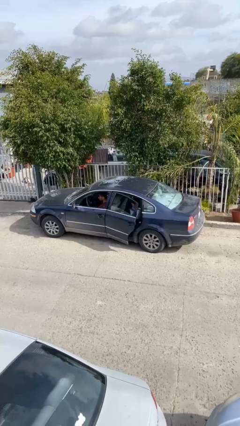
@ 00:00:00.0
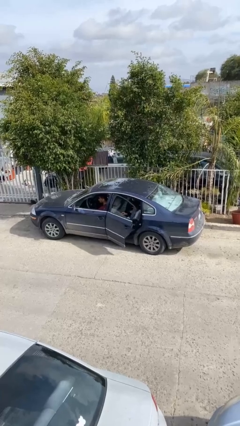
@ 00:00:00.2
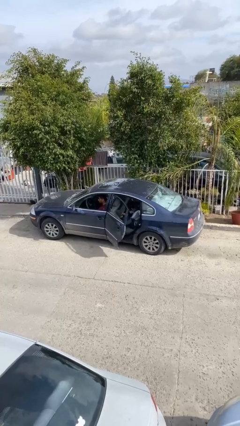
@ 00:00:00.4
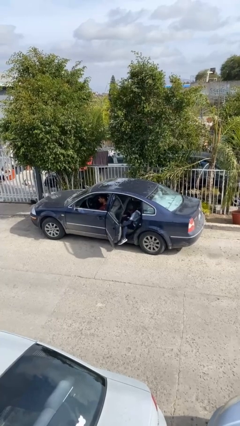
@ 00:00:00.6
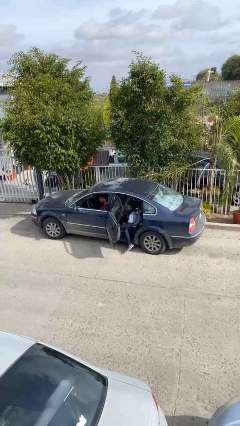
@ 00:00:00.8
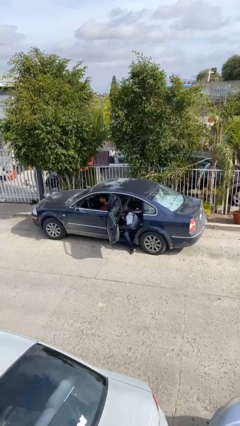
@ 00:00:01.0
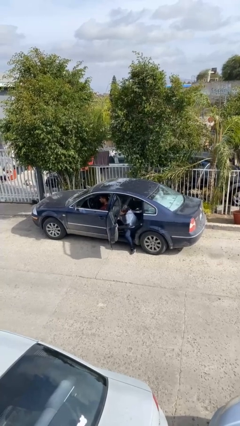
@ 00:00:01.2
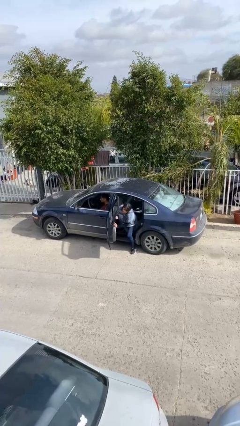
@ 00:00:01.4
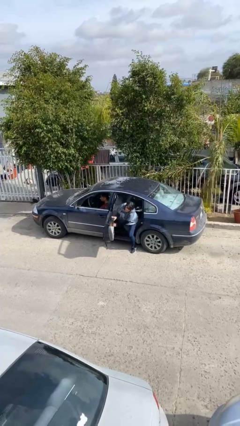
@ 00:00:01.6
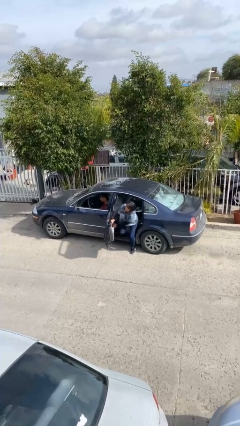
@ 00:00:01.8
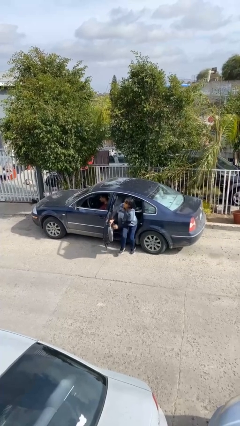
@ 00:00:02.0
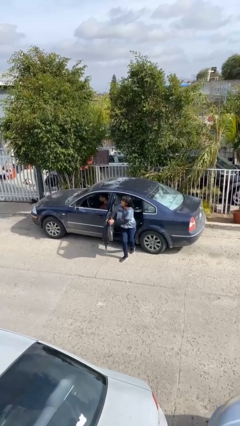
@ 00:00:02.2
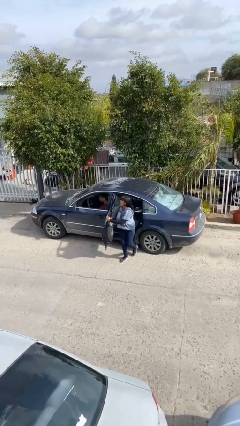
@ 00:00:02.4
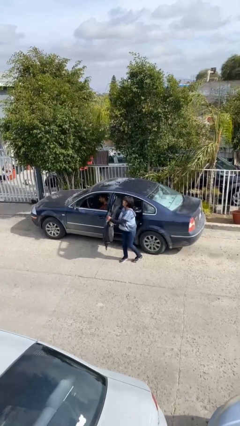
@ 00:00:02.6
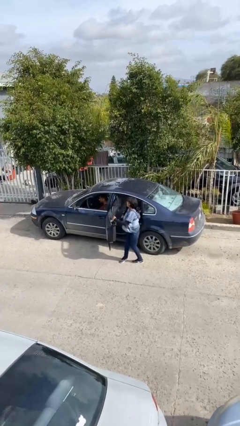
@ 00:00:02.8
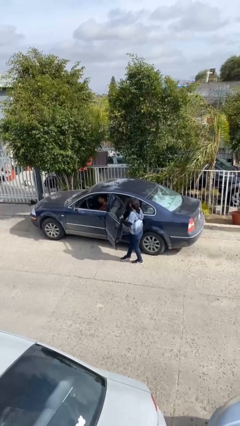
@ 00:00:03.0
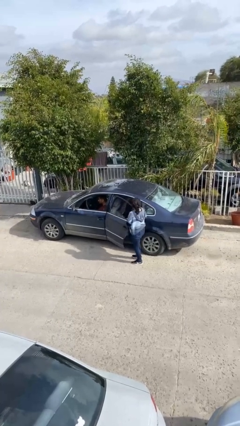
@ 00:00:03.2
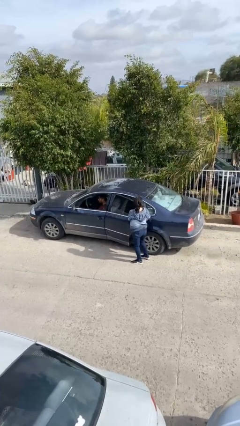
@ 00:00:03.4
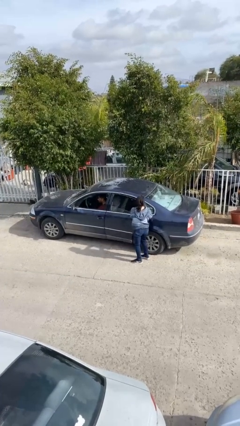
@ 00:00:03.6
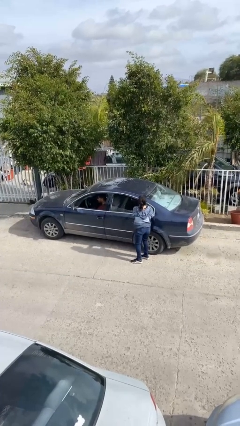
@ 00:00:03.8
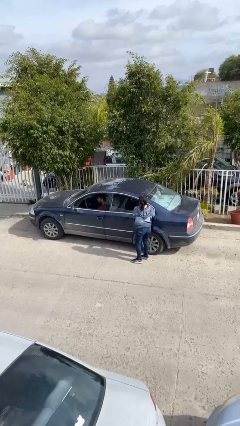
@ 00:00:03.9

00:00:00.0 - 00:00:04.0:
car drops off person

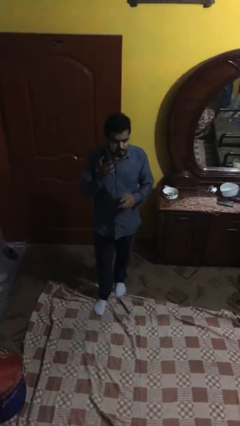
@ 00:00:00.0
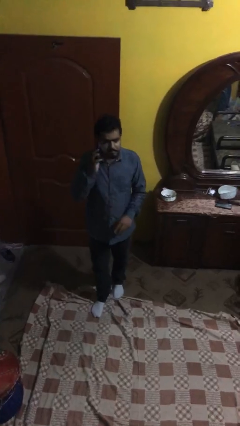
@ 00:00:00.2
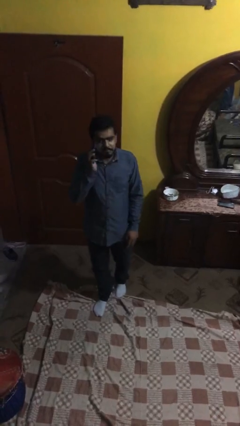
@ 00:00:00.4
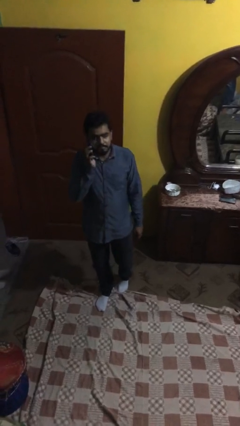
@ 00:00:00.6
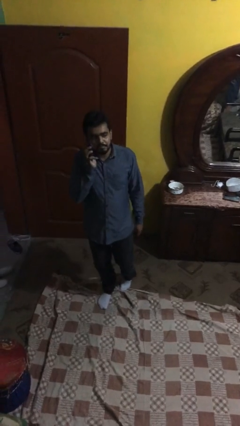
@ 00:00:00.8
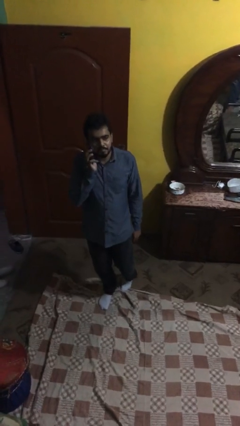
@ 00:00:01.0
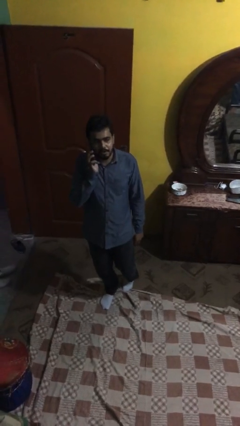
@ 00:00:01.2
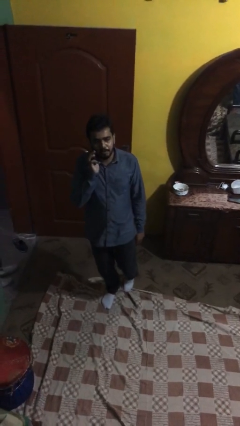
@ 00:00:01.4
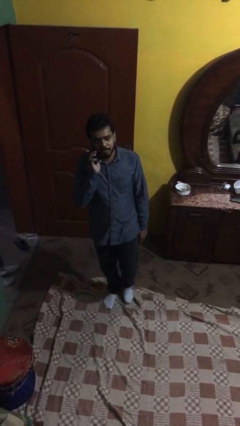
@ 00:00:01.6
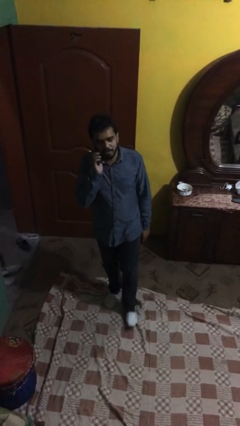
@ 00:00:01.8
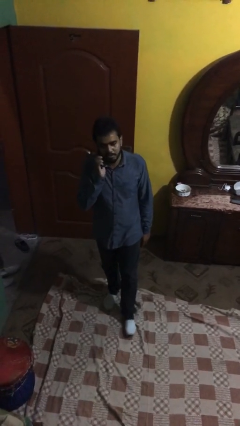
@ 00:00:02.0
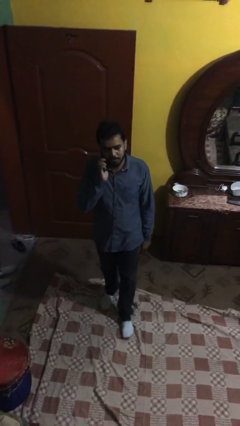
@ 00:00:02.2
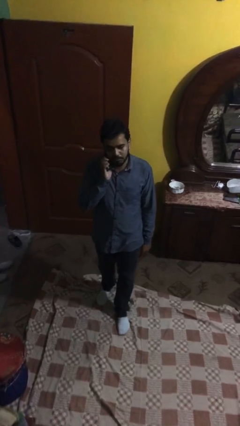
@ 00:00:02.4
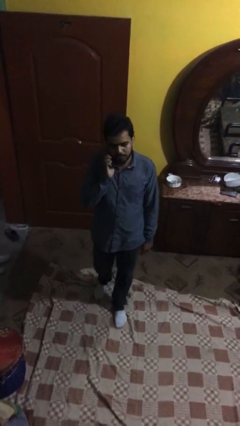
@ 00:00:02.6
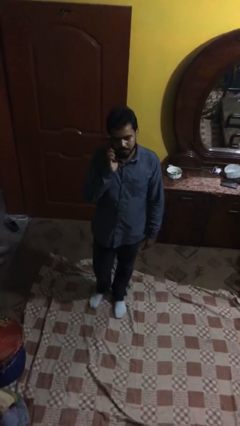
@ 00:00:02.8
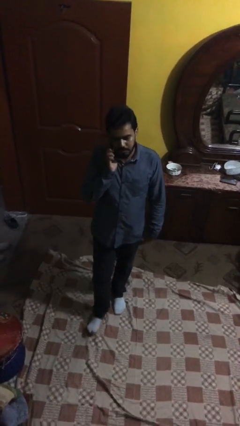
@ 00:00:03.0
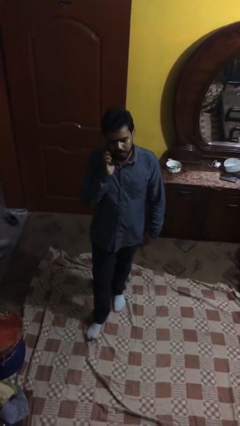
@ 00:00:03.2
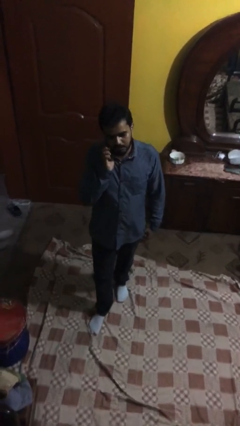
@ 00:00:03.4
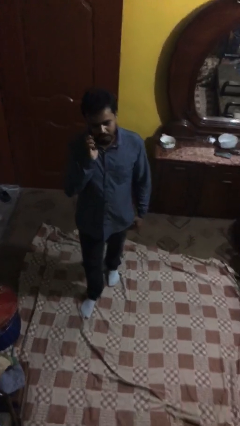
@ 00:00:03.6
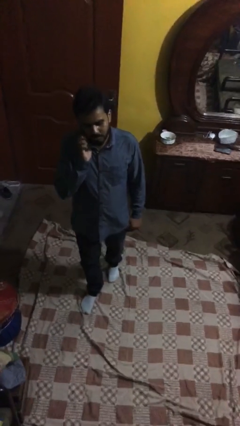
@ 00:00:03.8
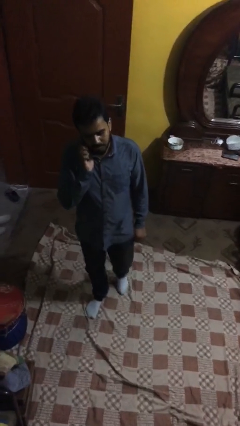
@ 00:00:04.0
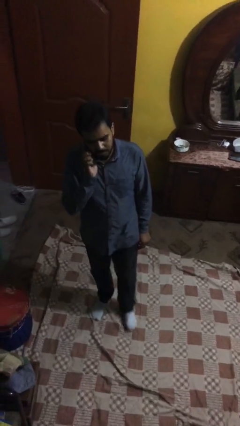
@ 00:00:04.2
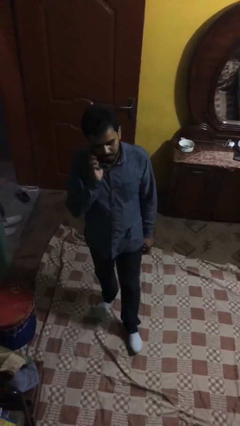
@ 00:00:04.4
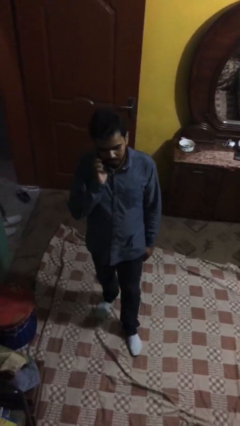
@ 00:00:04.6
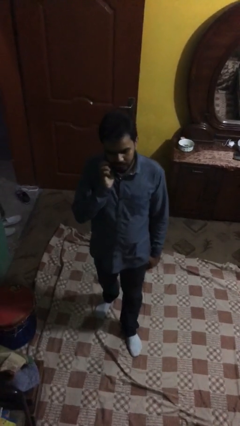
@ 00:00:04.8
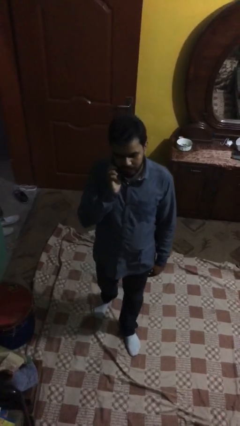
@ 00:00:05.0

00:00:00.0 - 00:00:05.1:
person talks on phone

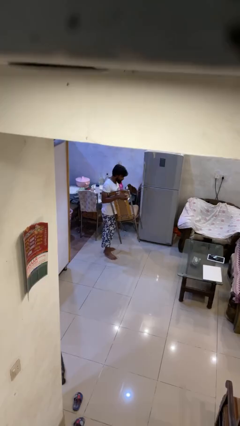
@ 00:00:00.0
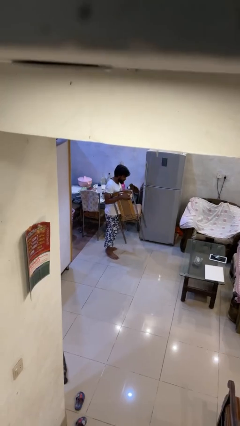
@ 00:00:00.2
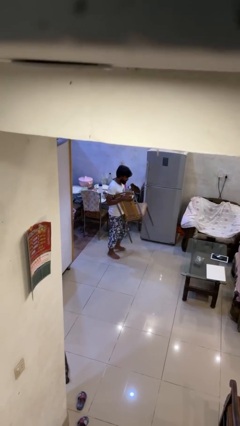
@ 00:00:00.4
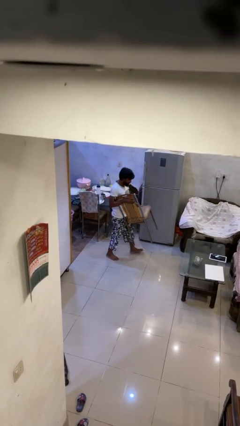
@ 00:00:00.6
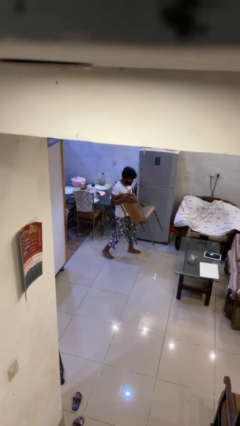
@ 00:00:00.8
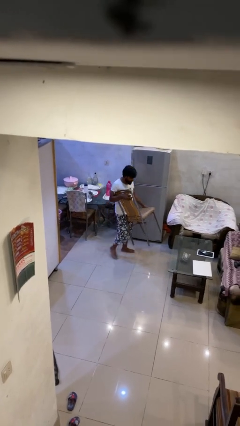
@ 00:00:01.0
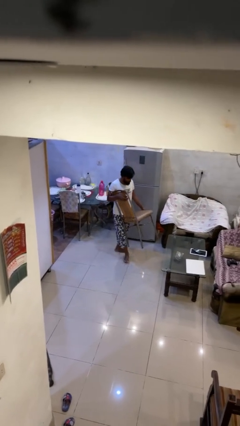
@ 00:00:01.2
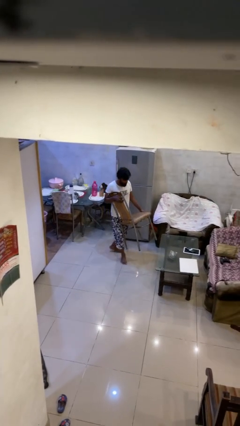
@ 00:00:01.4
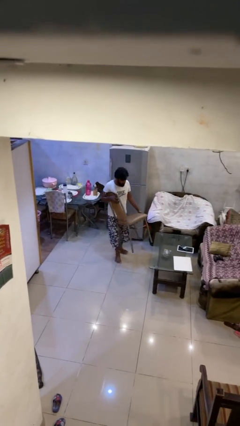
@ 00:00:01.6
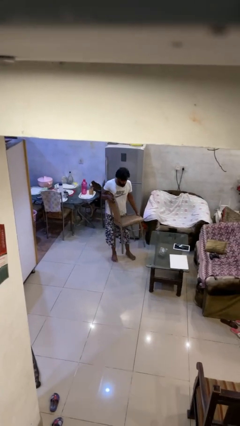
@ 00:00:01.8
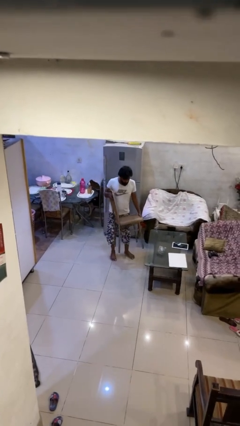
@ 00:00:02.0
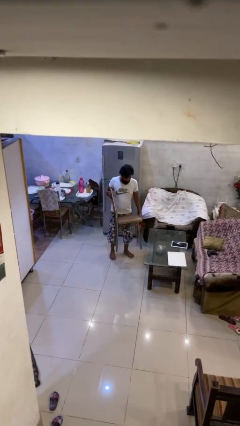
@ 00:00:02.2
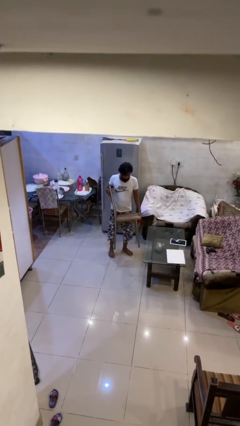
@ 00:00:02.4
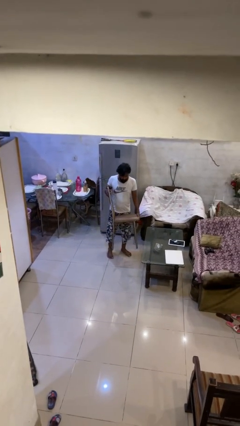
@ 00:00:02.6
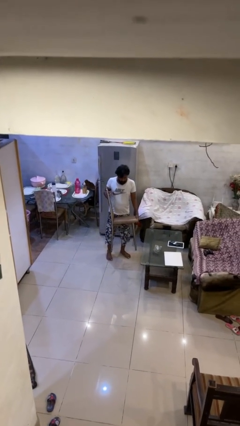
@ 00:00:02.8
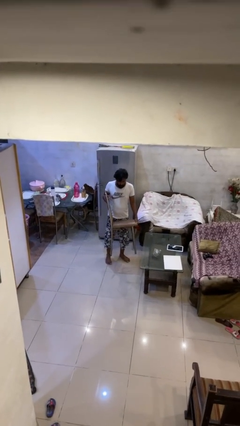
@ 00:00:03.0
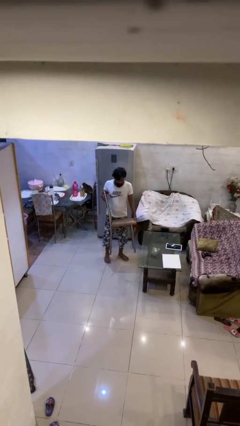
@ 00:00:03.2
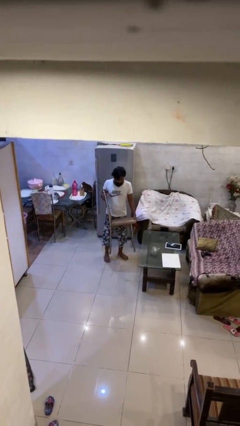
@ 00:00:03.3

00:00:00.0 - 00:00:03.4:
person carries furniture

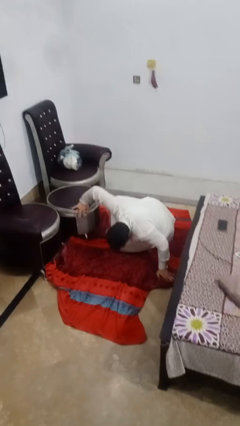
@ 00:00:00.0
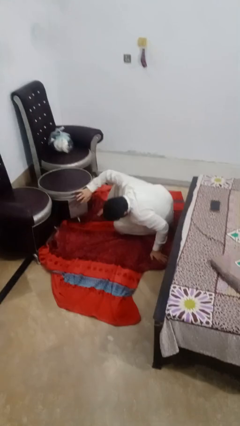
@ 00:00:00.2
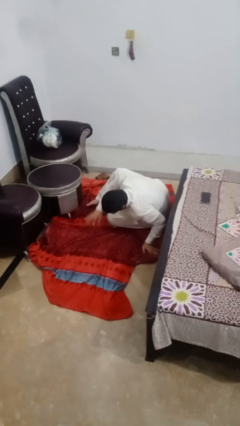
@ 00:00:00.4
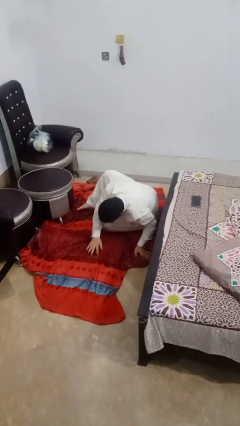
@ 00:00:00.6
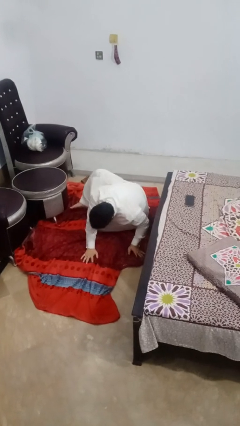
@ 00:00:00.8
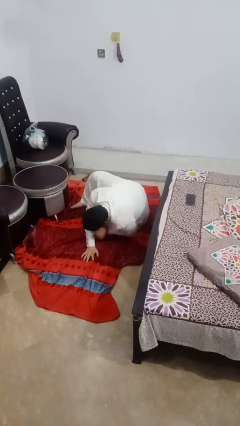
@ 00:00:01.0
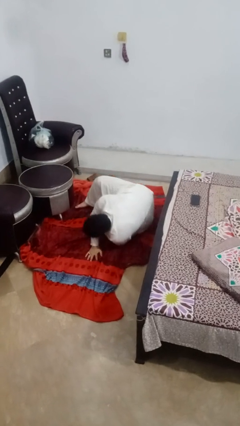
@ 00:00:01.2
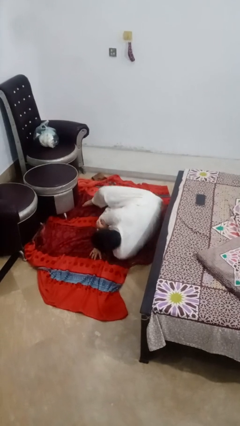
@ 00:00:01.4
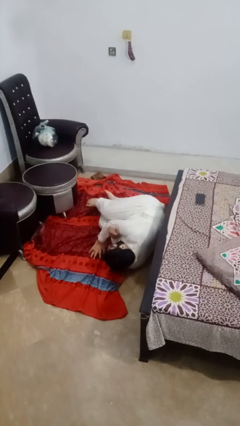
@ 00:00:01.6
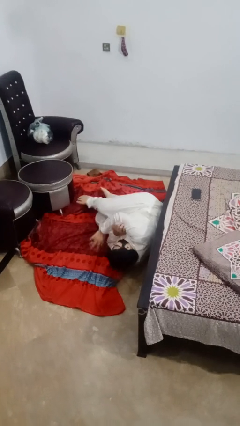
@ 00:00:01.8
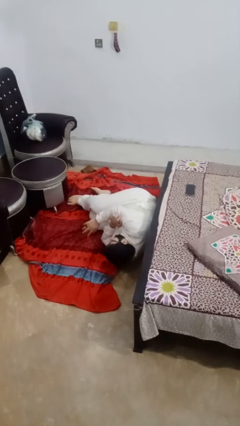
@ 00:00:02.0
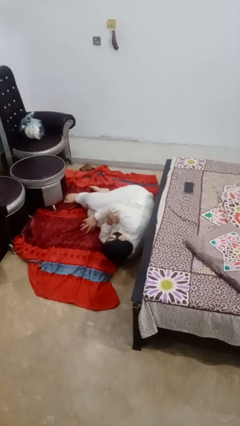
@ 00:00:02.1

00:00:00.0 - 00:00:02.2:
person lies down on floor

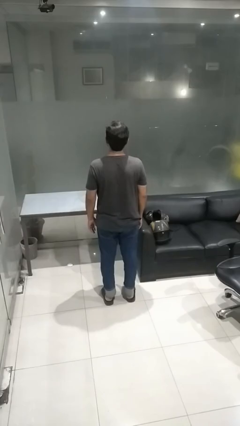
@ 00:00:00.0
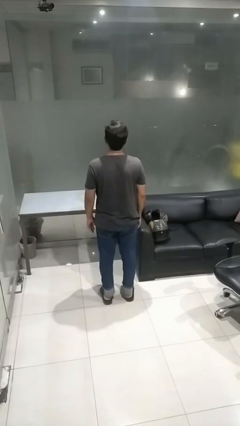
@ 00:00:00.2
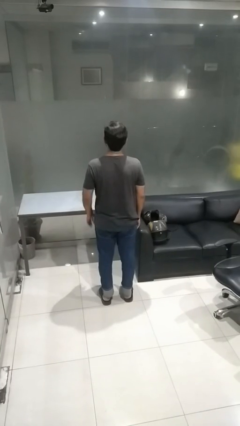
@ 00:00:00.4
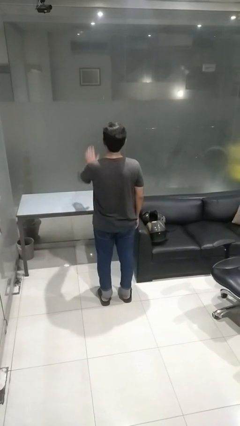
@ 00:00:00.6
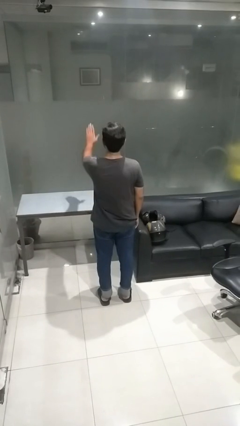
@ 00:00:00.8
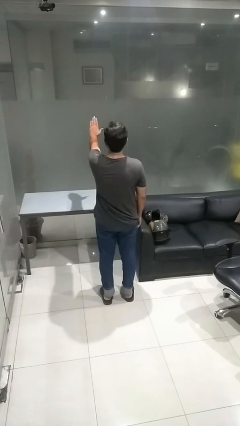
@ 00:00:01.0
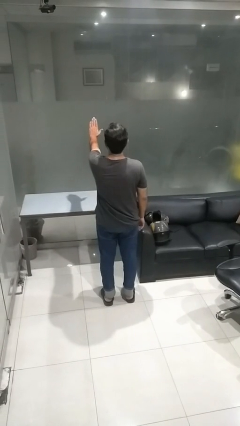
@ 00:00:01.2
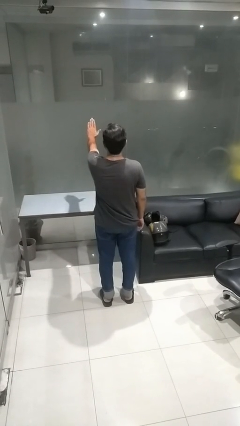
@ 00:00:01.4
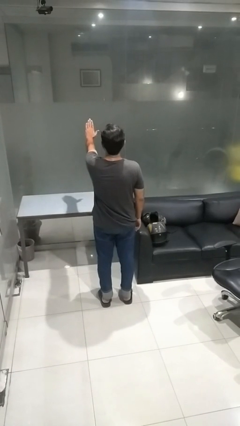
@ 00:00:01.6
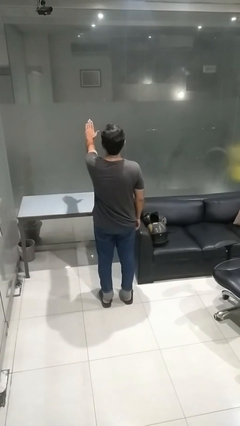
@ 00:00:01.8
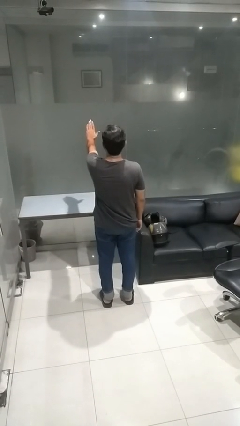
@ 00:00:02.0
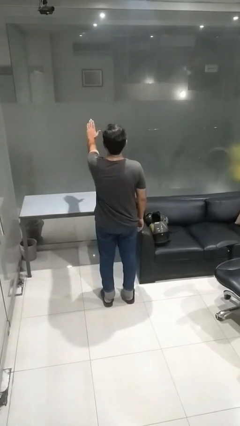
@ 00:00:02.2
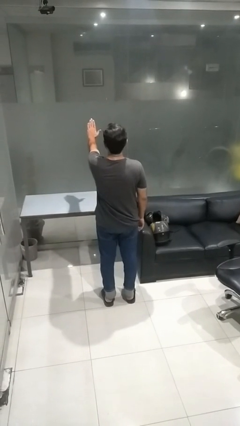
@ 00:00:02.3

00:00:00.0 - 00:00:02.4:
person gestures stop

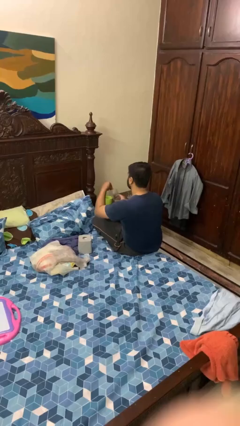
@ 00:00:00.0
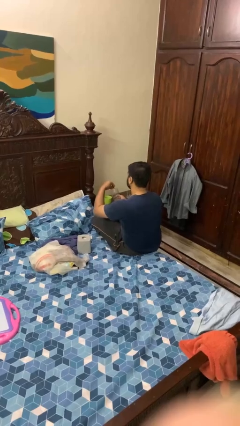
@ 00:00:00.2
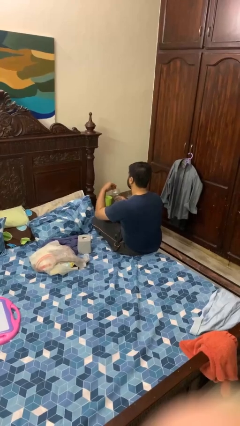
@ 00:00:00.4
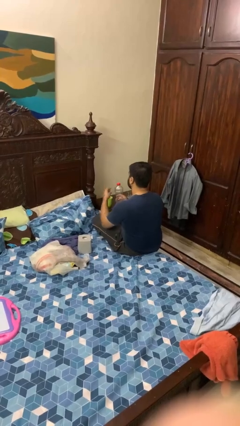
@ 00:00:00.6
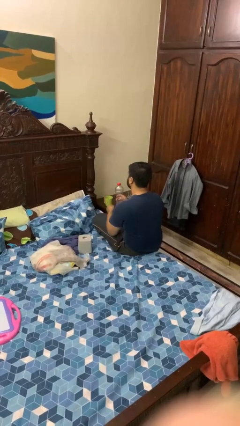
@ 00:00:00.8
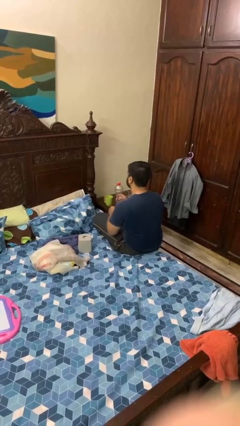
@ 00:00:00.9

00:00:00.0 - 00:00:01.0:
person screws lid to bottle
